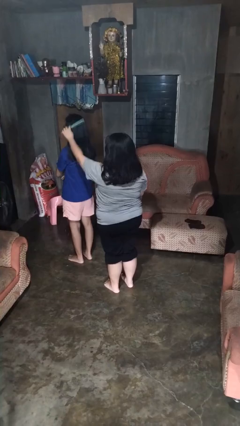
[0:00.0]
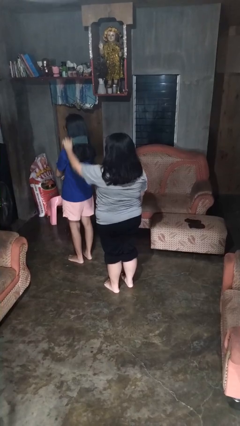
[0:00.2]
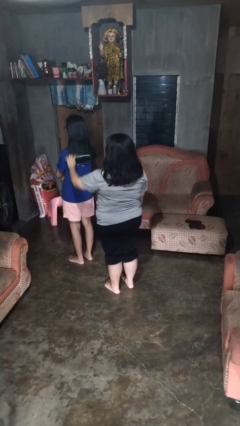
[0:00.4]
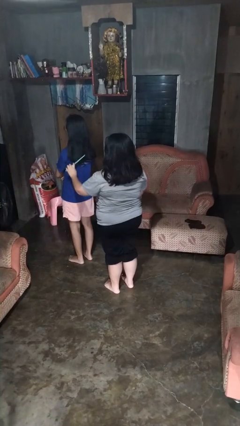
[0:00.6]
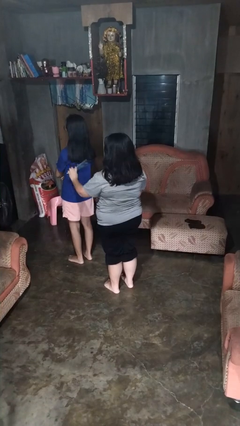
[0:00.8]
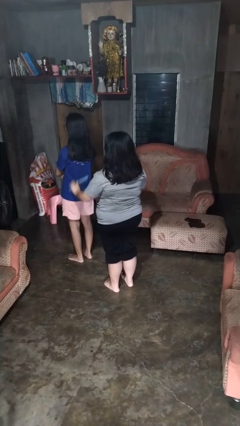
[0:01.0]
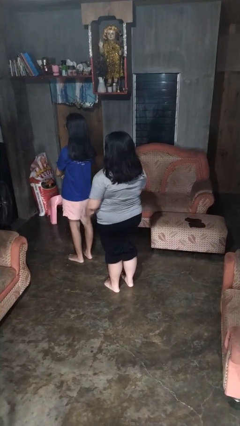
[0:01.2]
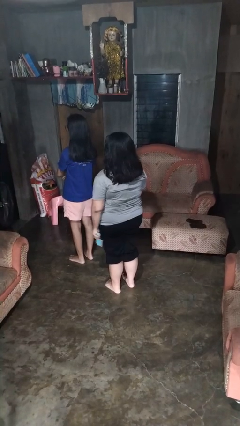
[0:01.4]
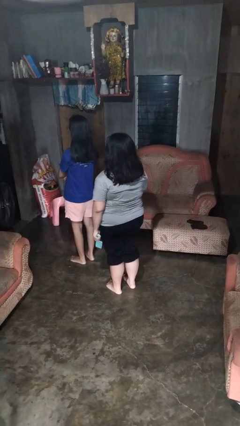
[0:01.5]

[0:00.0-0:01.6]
person brushes hair of person

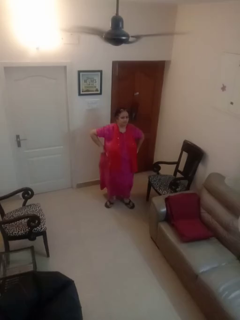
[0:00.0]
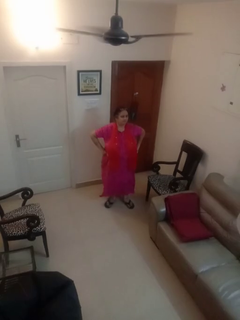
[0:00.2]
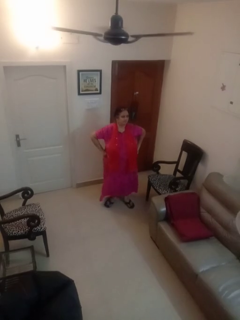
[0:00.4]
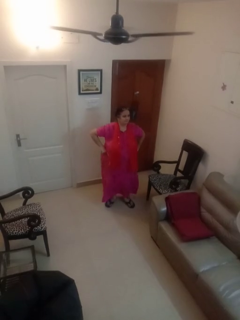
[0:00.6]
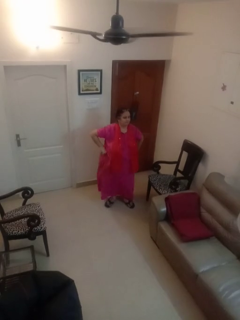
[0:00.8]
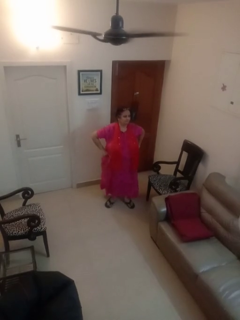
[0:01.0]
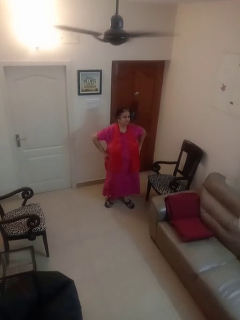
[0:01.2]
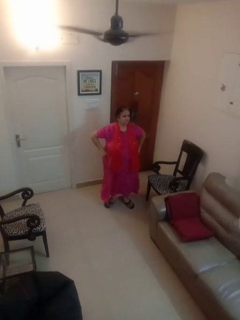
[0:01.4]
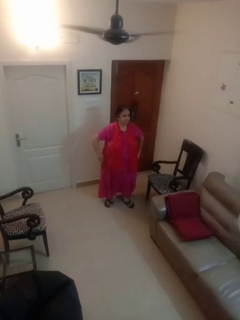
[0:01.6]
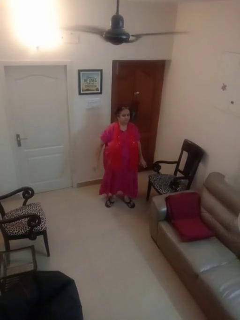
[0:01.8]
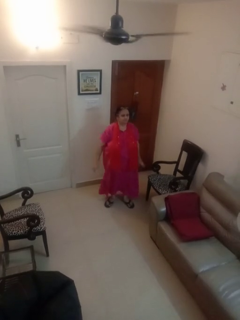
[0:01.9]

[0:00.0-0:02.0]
person wiggles hips

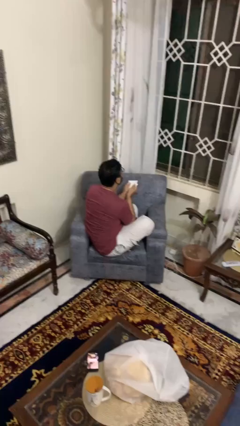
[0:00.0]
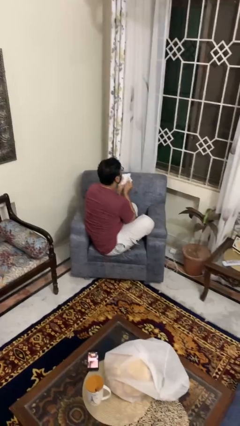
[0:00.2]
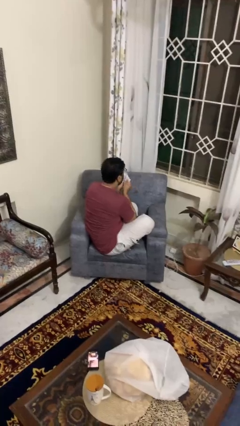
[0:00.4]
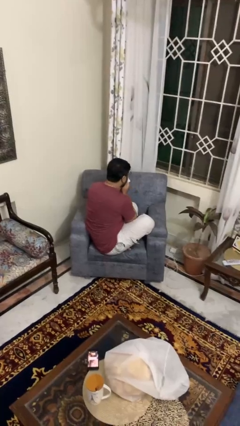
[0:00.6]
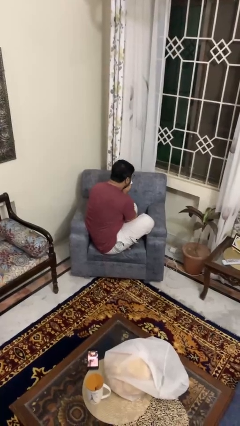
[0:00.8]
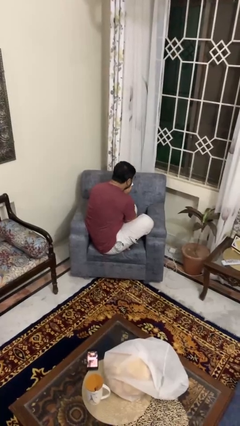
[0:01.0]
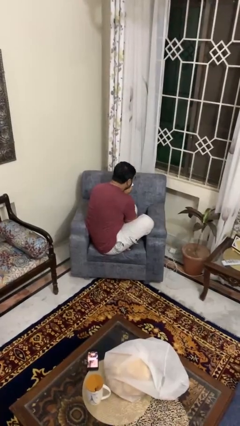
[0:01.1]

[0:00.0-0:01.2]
person blows nose

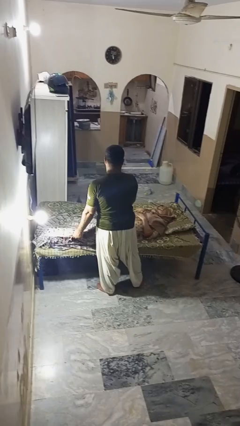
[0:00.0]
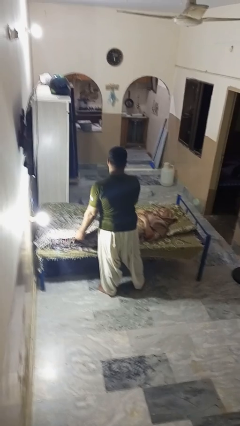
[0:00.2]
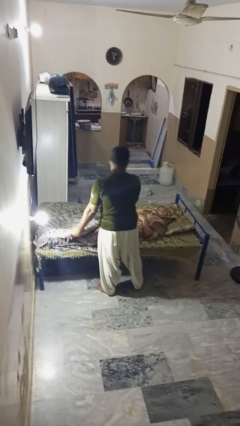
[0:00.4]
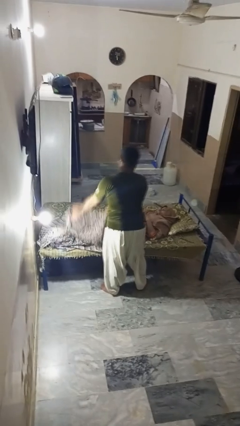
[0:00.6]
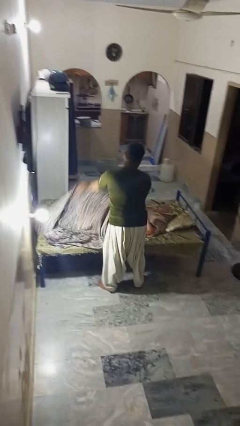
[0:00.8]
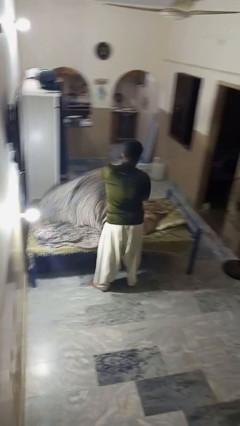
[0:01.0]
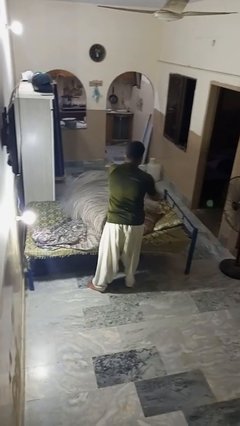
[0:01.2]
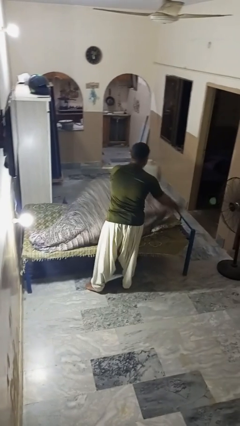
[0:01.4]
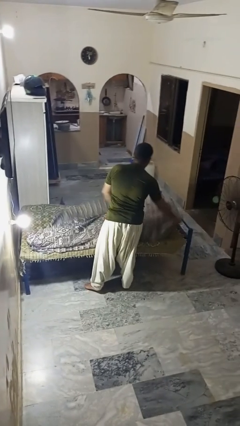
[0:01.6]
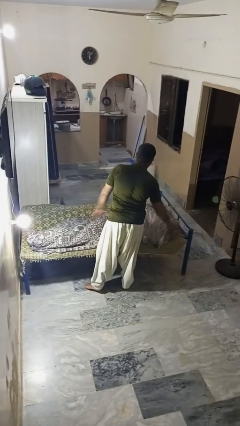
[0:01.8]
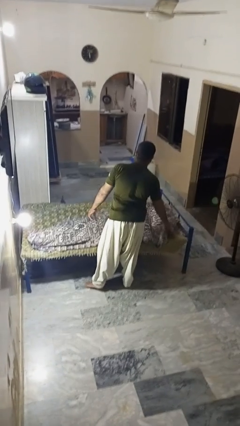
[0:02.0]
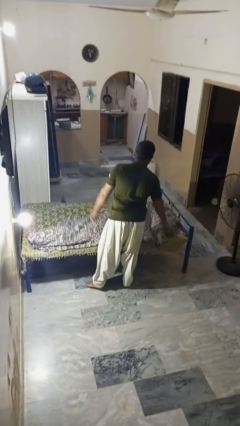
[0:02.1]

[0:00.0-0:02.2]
person covers friend with blanket

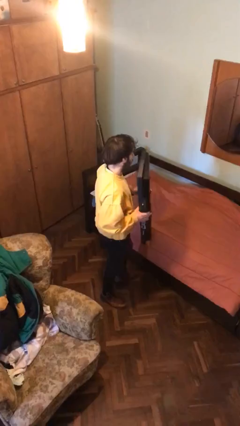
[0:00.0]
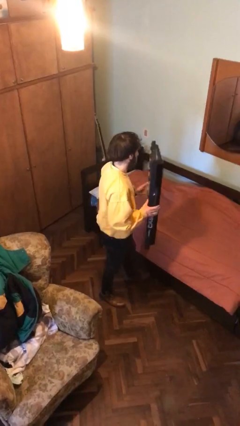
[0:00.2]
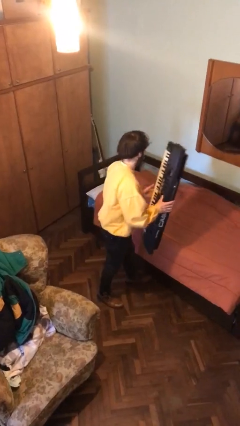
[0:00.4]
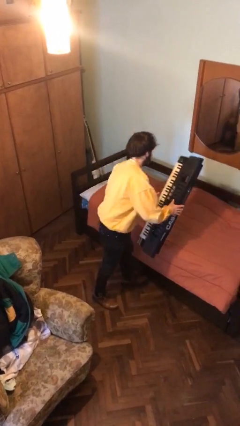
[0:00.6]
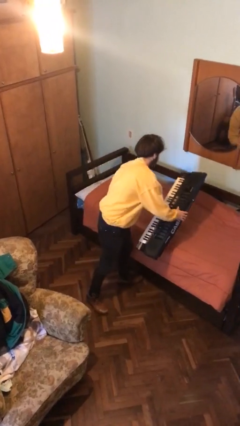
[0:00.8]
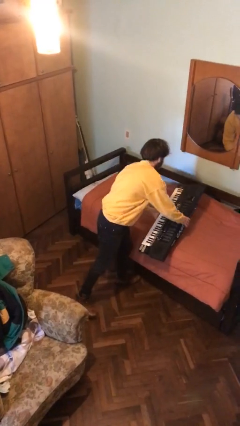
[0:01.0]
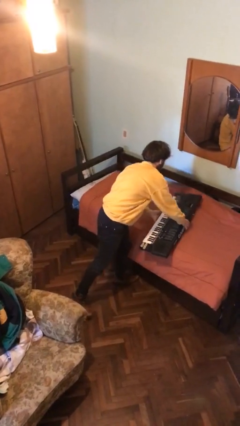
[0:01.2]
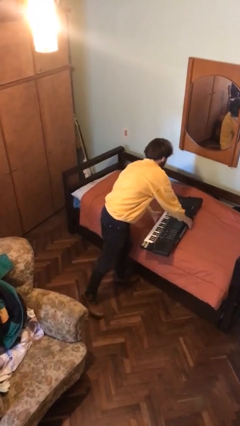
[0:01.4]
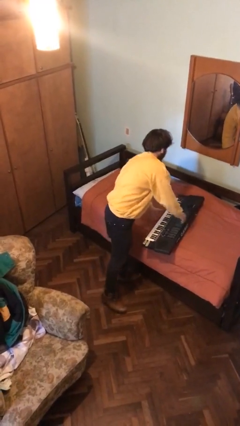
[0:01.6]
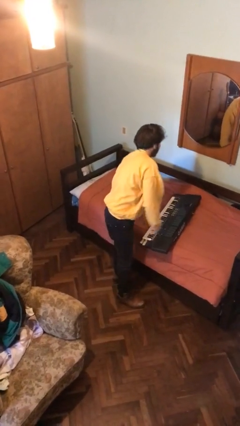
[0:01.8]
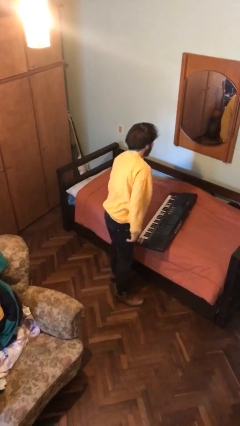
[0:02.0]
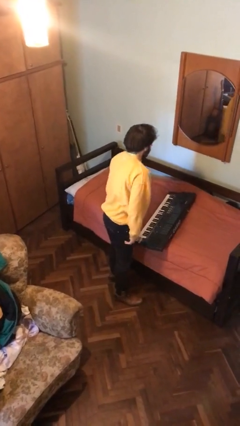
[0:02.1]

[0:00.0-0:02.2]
person puts down object on bed

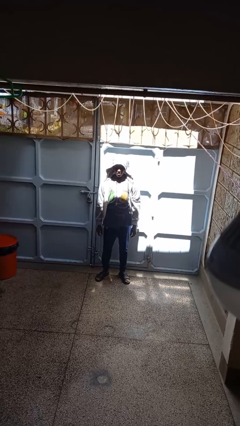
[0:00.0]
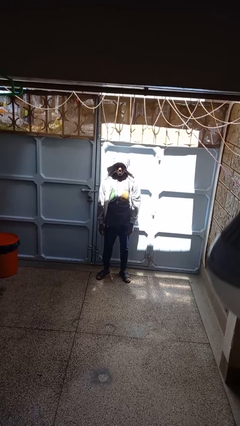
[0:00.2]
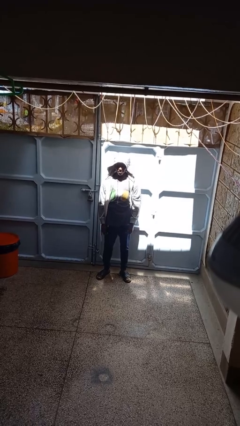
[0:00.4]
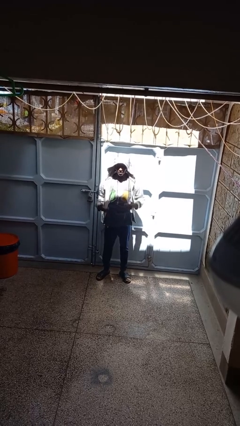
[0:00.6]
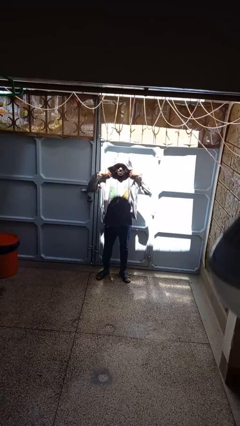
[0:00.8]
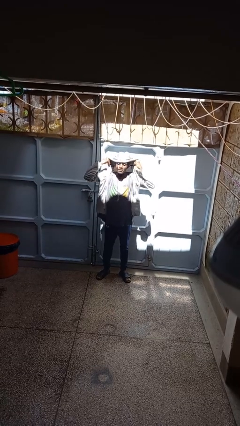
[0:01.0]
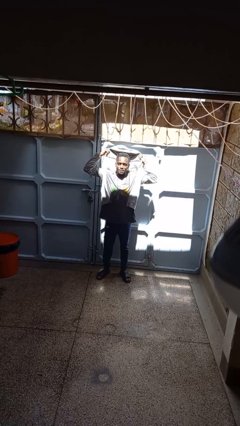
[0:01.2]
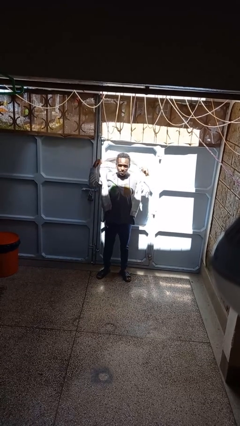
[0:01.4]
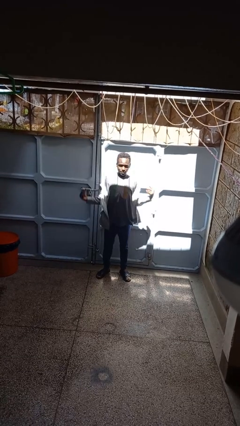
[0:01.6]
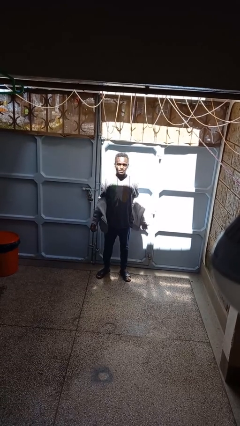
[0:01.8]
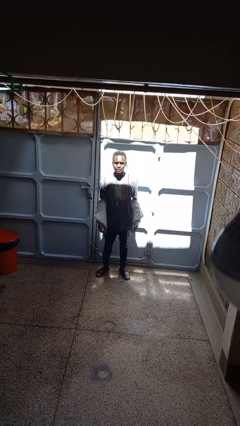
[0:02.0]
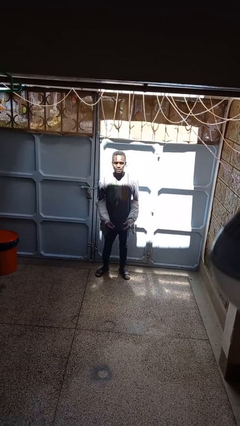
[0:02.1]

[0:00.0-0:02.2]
person takes off hoodie

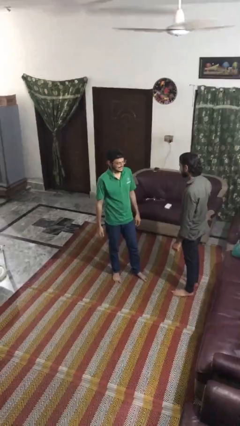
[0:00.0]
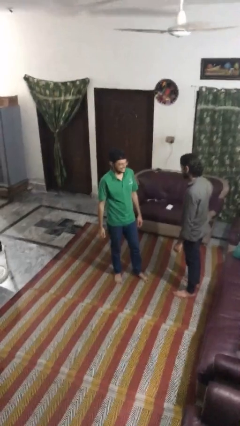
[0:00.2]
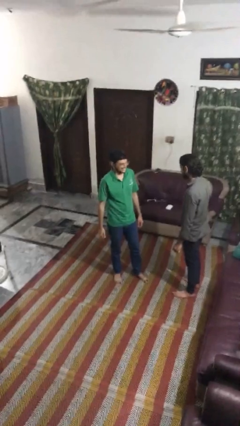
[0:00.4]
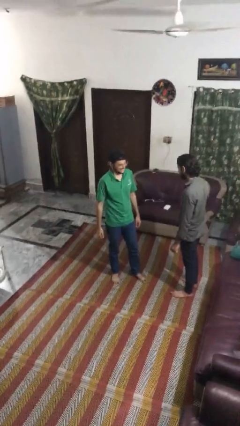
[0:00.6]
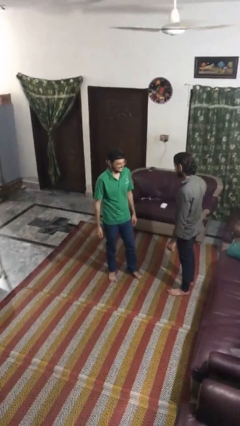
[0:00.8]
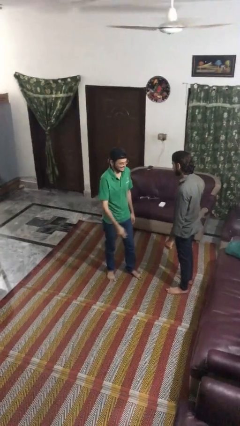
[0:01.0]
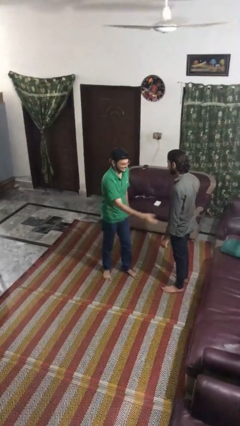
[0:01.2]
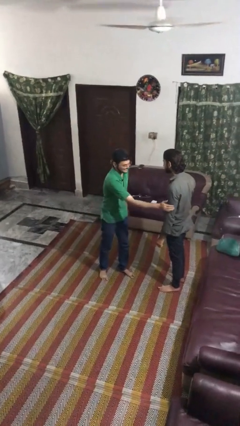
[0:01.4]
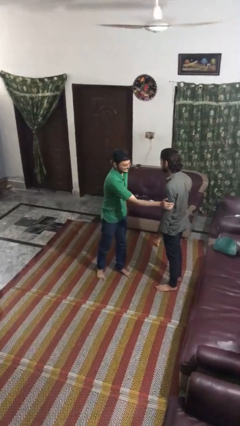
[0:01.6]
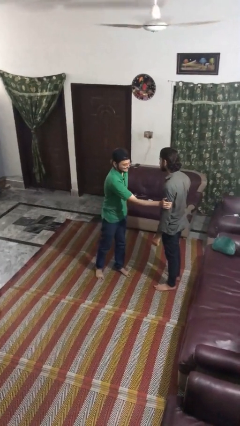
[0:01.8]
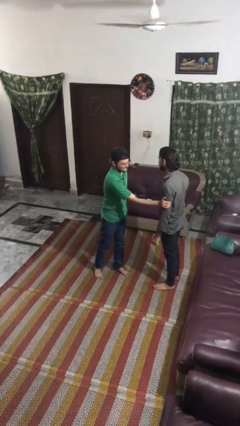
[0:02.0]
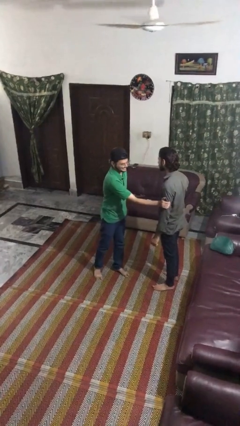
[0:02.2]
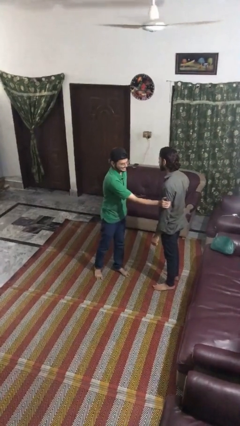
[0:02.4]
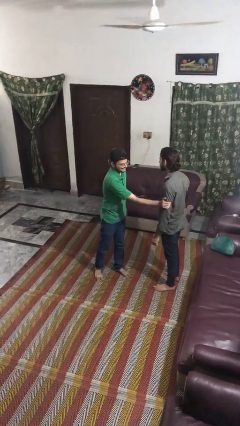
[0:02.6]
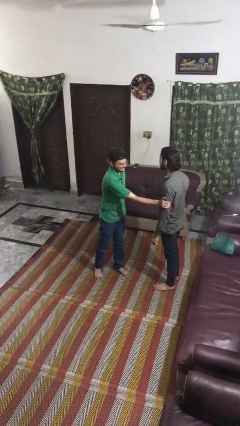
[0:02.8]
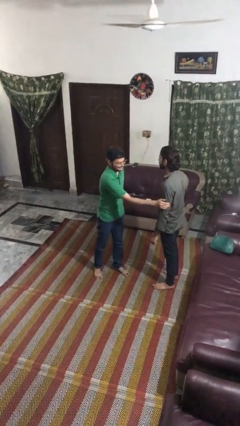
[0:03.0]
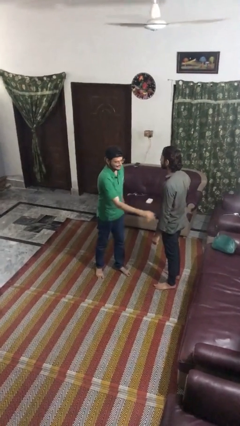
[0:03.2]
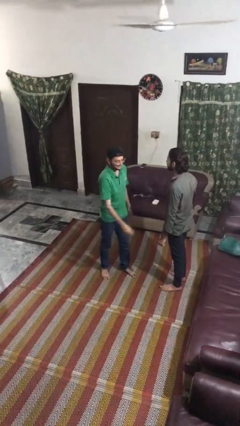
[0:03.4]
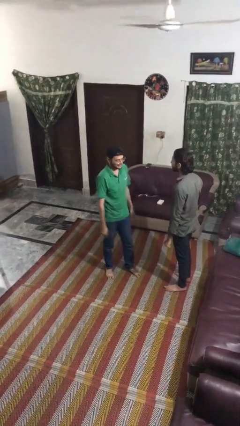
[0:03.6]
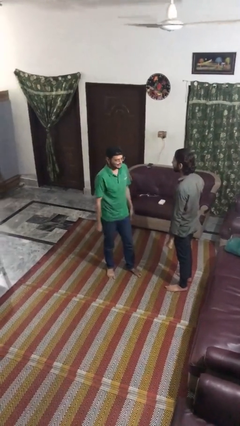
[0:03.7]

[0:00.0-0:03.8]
person grabs person by hair

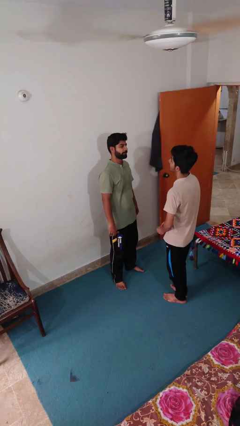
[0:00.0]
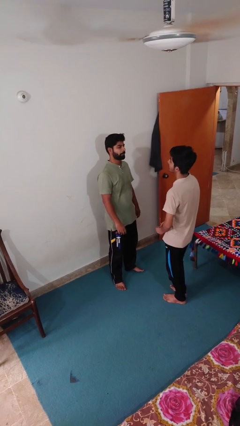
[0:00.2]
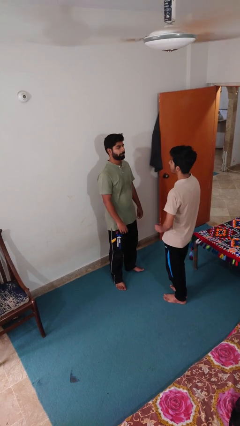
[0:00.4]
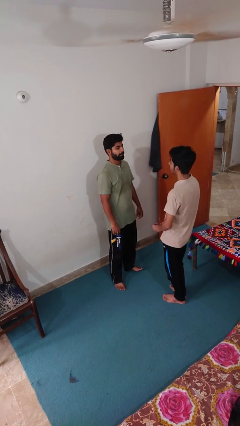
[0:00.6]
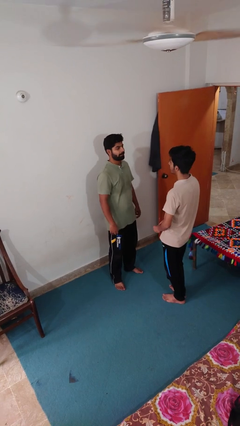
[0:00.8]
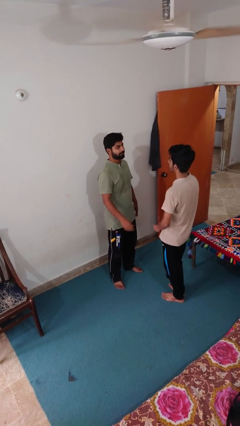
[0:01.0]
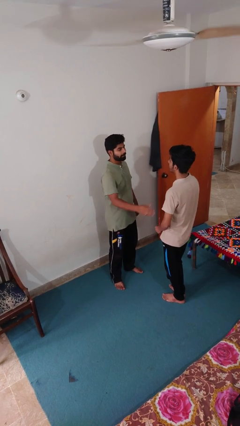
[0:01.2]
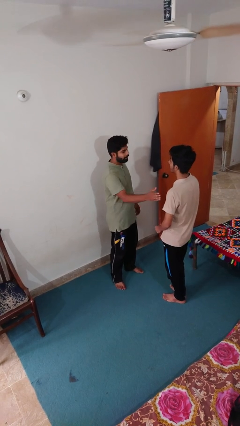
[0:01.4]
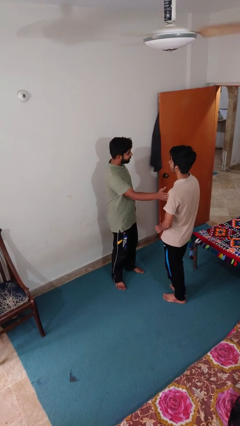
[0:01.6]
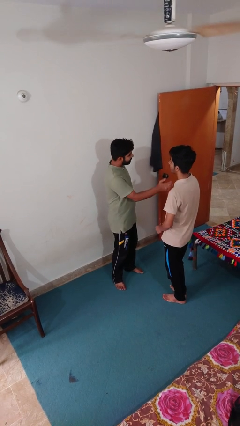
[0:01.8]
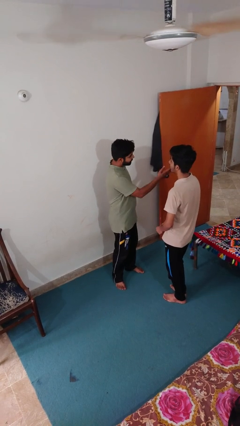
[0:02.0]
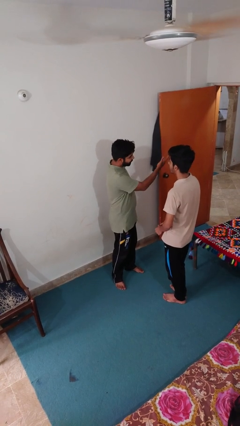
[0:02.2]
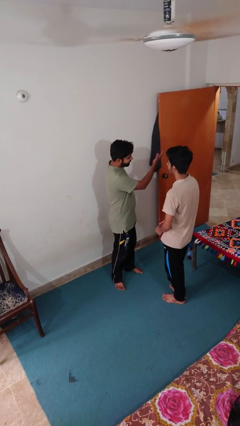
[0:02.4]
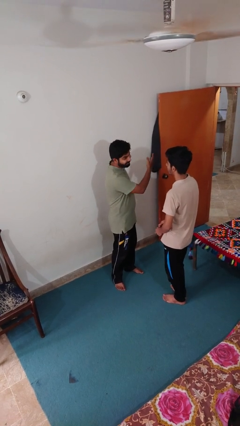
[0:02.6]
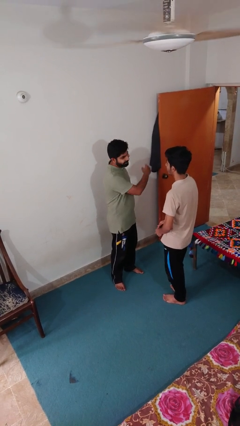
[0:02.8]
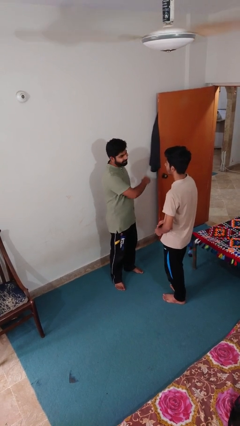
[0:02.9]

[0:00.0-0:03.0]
person shoves person
